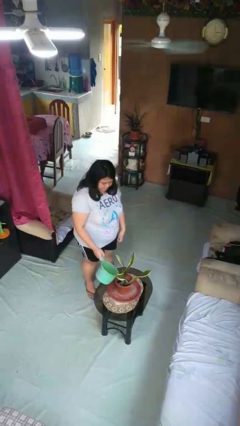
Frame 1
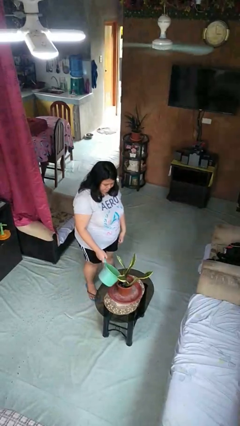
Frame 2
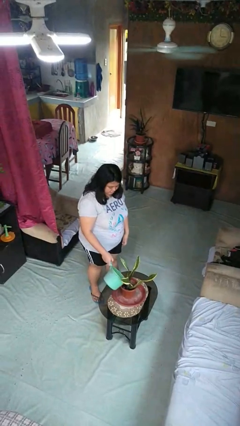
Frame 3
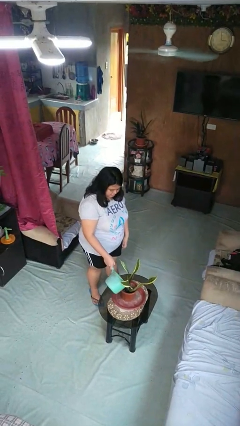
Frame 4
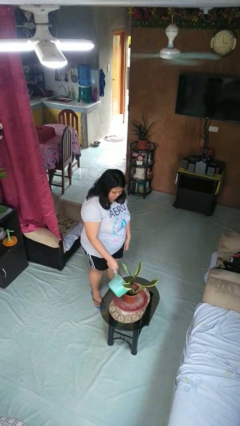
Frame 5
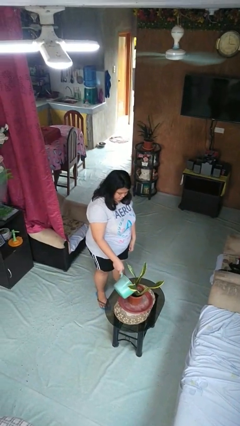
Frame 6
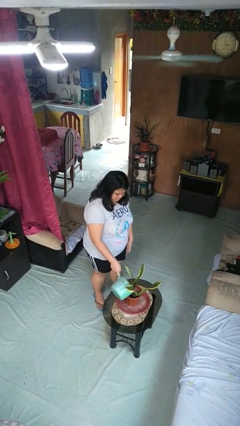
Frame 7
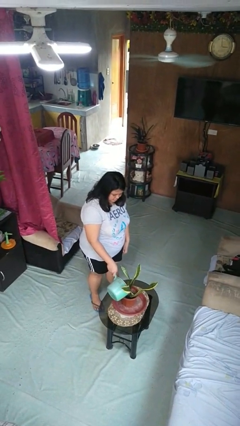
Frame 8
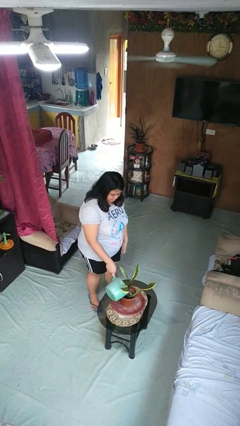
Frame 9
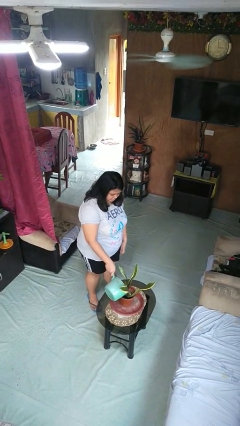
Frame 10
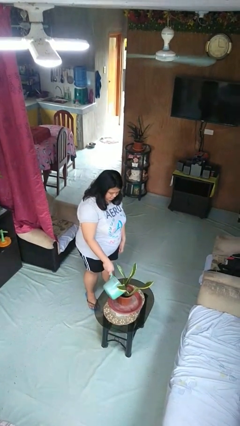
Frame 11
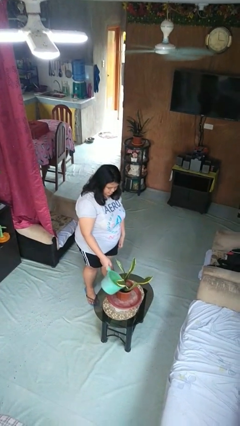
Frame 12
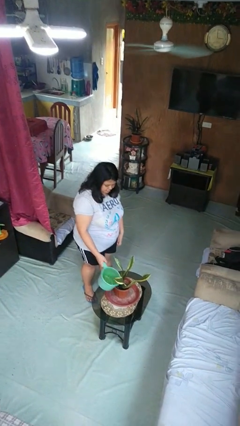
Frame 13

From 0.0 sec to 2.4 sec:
person waters houseplant

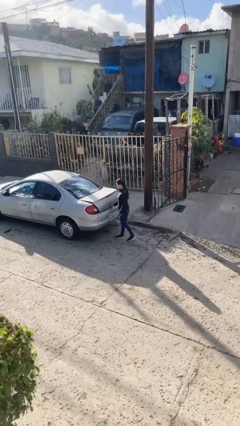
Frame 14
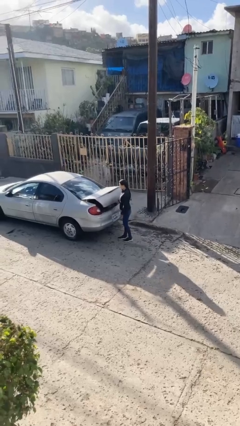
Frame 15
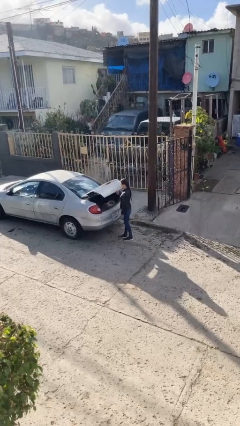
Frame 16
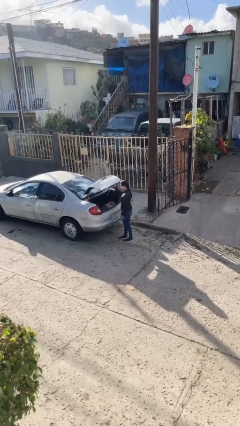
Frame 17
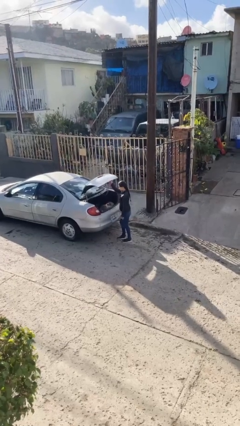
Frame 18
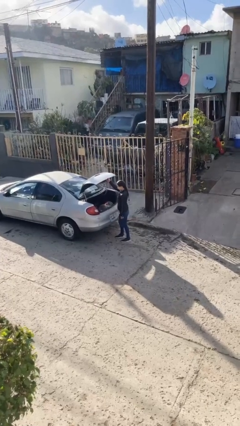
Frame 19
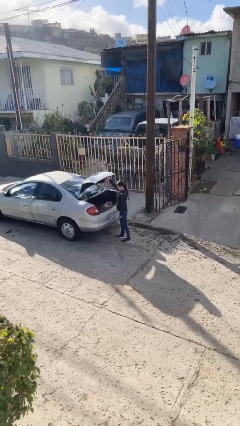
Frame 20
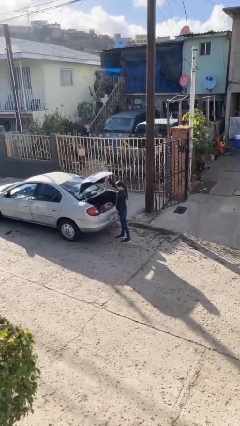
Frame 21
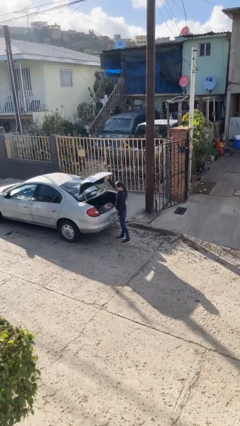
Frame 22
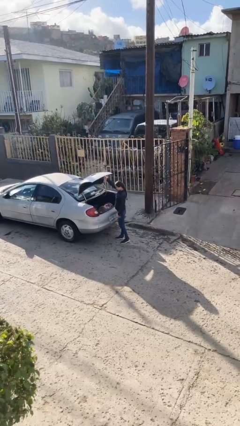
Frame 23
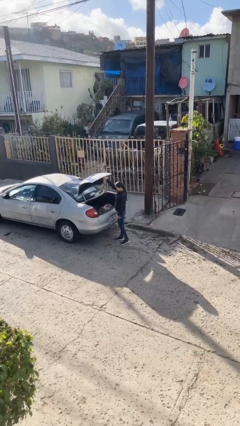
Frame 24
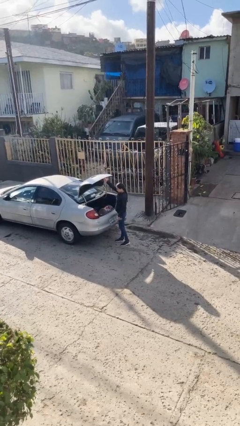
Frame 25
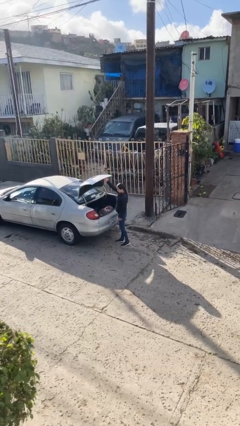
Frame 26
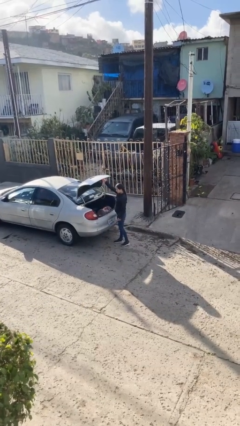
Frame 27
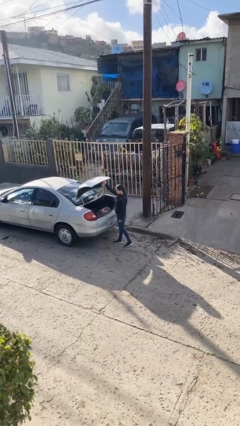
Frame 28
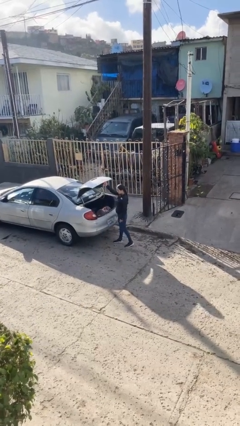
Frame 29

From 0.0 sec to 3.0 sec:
person opens car trunk

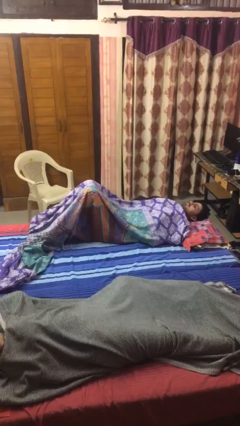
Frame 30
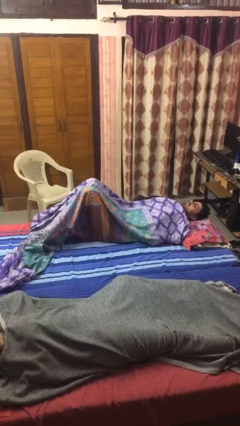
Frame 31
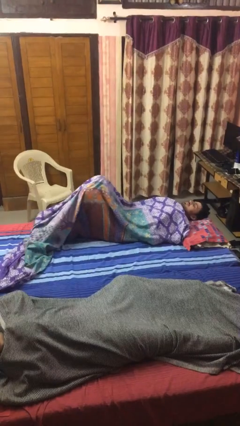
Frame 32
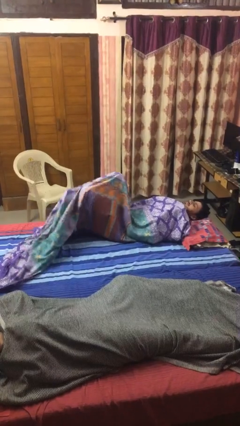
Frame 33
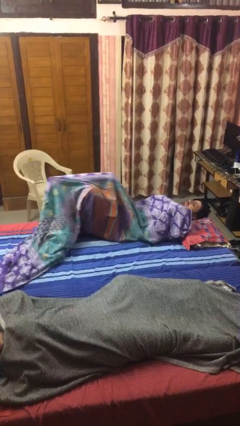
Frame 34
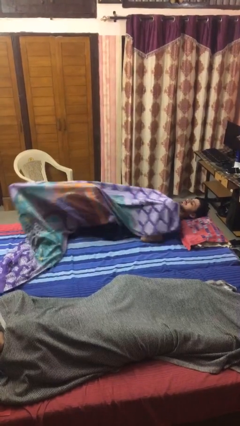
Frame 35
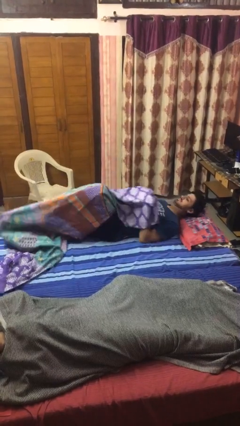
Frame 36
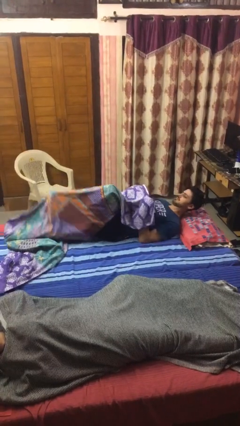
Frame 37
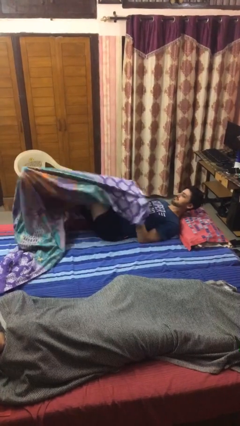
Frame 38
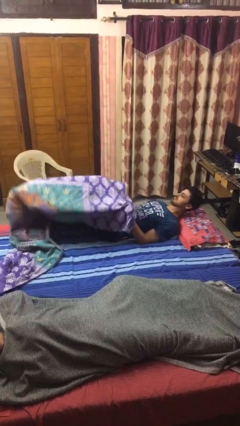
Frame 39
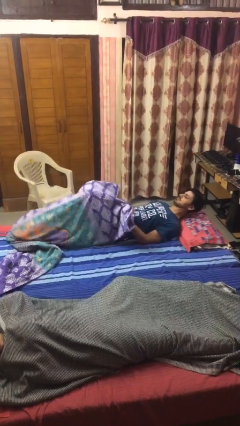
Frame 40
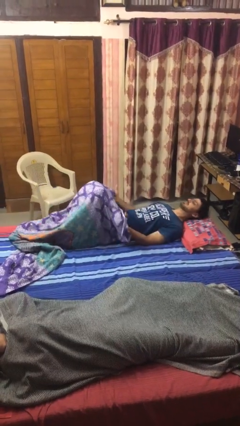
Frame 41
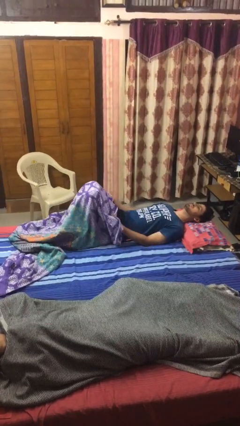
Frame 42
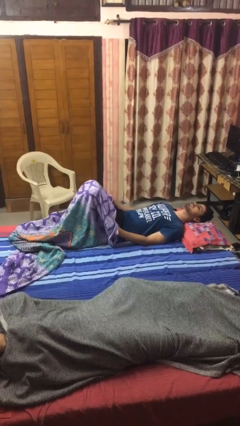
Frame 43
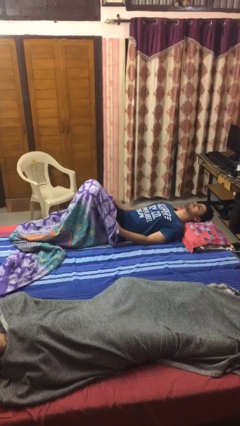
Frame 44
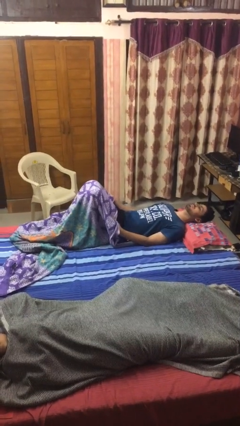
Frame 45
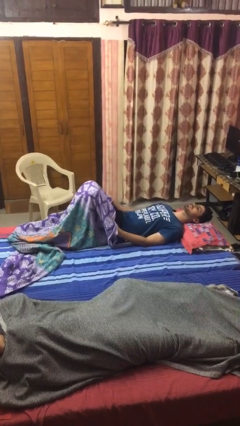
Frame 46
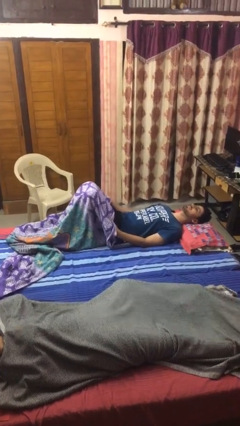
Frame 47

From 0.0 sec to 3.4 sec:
person uncovers with bedsheets

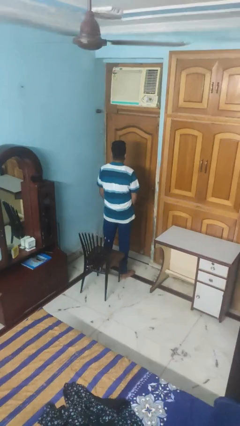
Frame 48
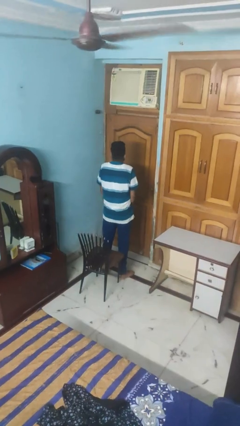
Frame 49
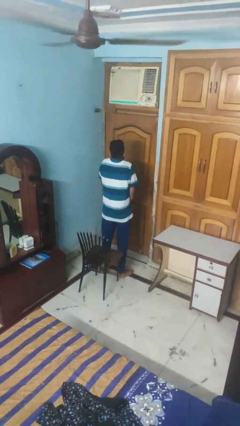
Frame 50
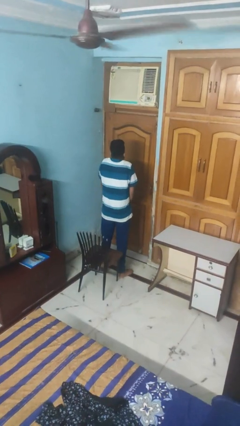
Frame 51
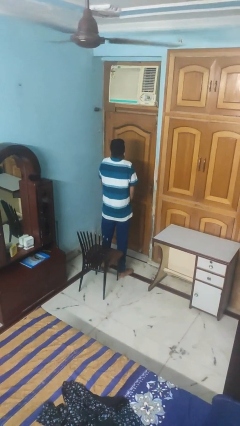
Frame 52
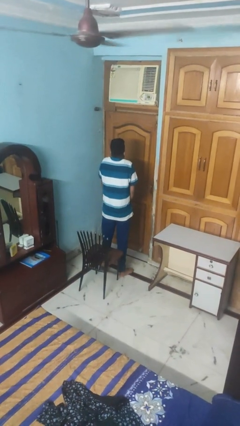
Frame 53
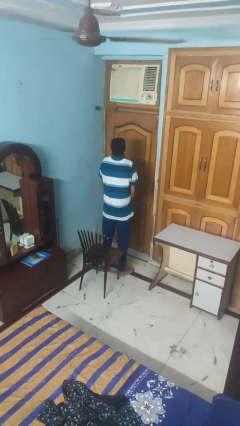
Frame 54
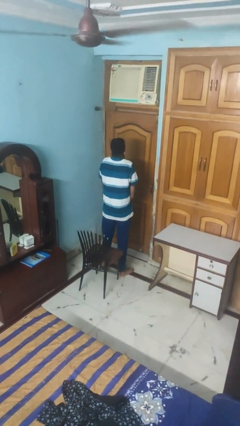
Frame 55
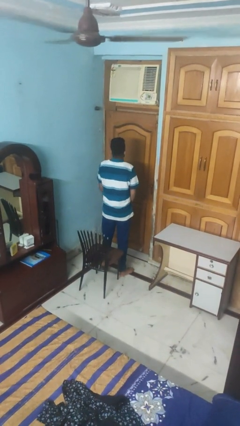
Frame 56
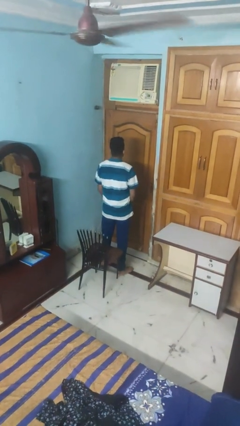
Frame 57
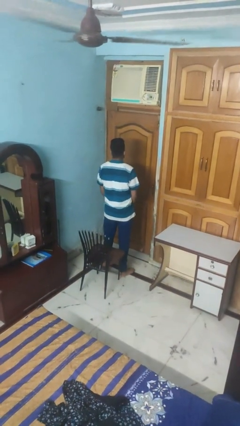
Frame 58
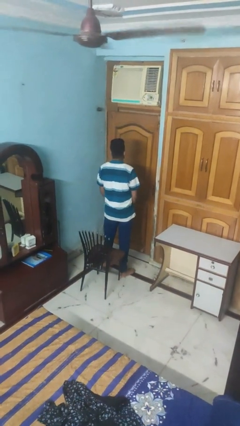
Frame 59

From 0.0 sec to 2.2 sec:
person shrugs

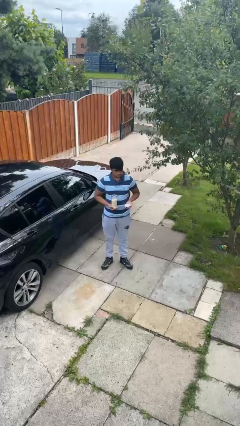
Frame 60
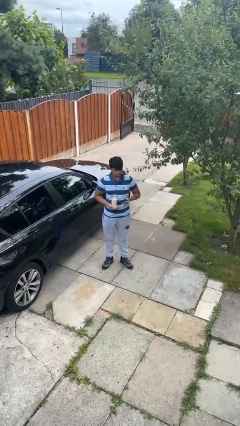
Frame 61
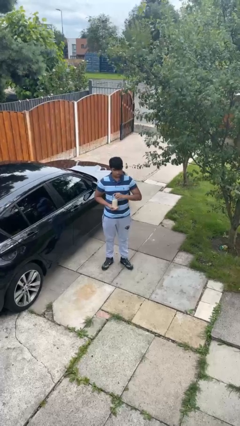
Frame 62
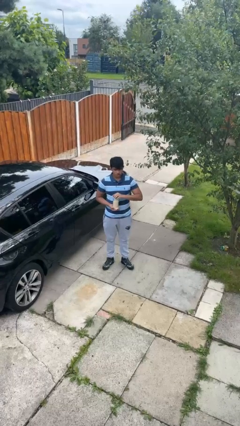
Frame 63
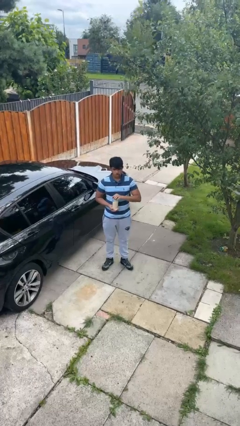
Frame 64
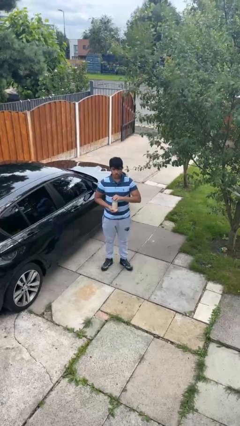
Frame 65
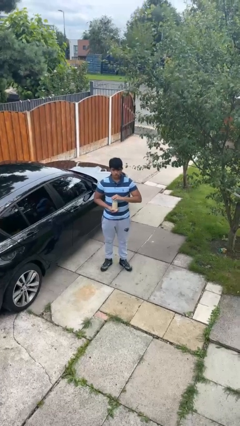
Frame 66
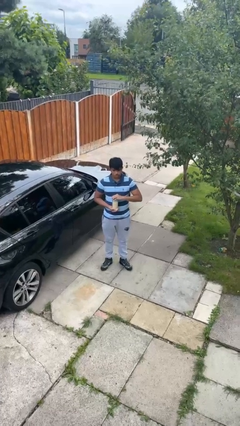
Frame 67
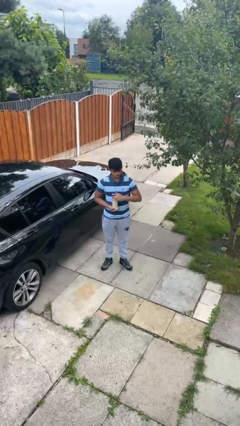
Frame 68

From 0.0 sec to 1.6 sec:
person closes jar

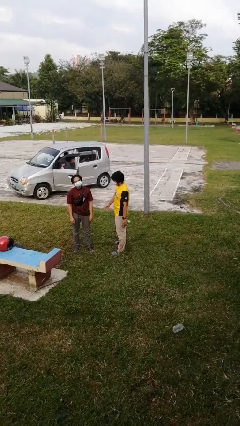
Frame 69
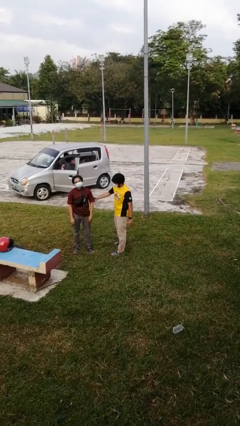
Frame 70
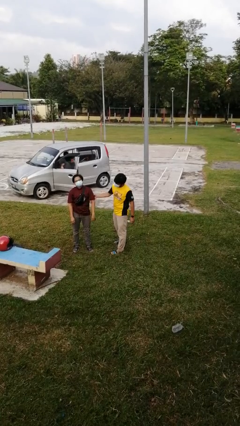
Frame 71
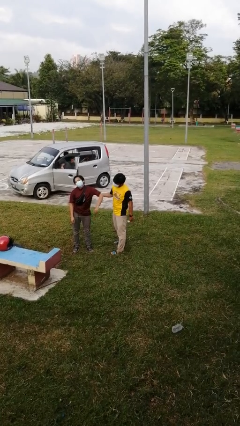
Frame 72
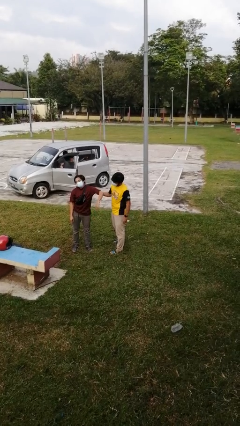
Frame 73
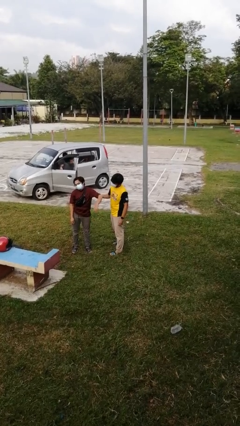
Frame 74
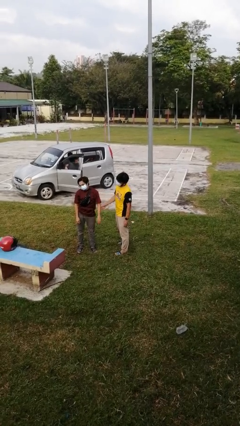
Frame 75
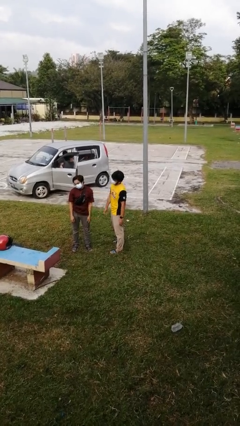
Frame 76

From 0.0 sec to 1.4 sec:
person grabs person by bicep

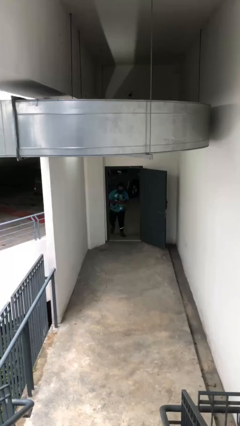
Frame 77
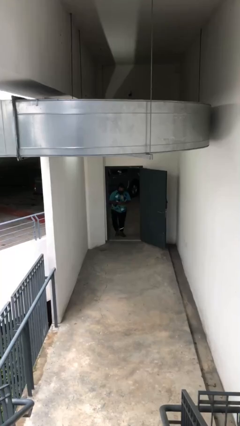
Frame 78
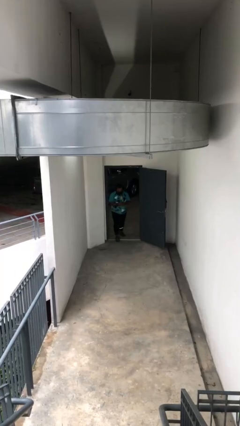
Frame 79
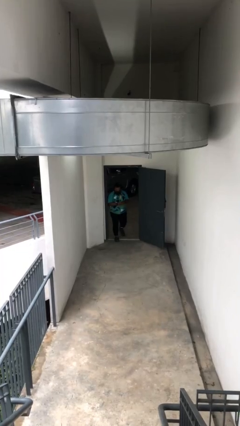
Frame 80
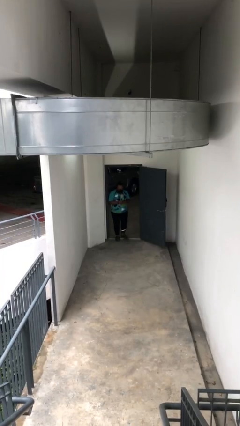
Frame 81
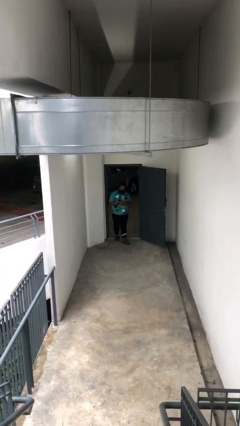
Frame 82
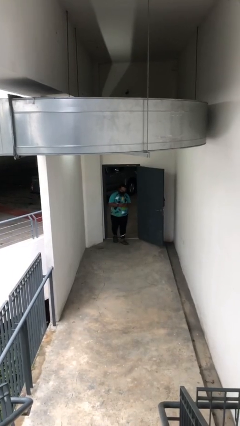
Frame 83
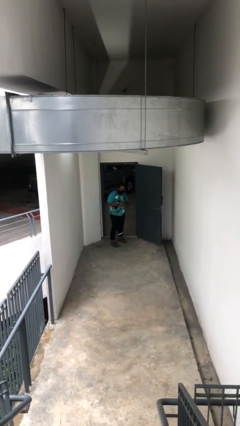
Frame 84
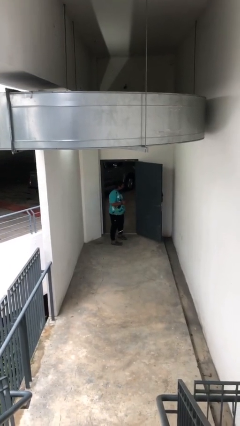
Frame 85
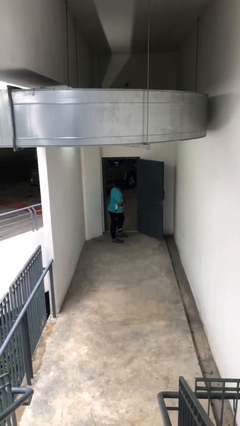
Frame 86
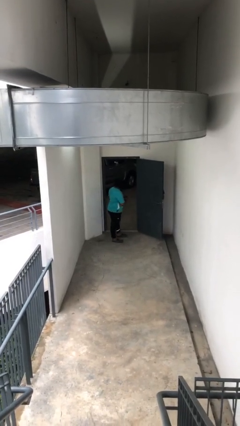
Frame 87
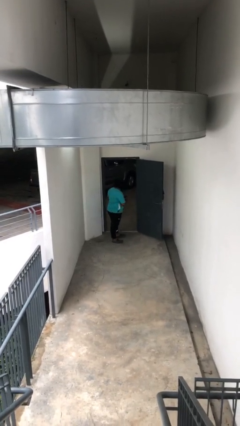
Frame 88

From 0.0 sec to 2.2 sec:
person enters scene through structure

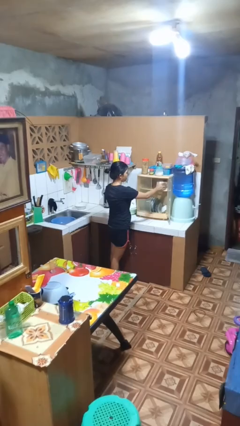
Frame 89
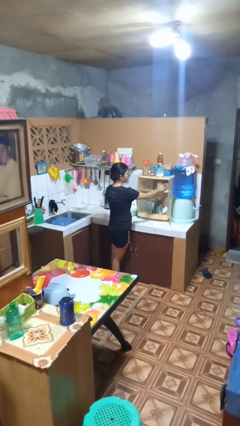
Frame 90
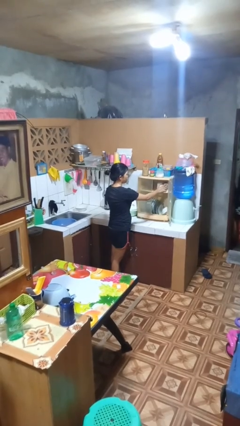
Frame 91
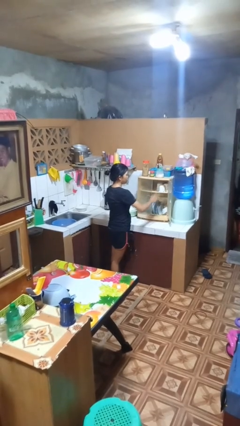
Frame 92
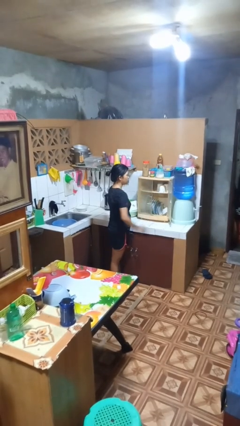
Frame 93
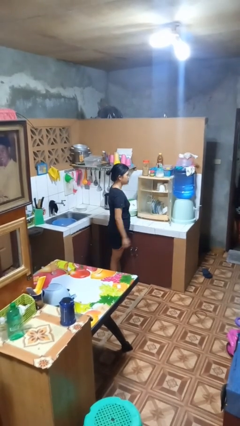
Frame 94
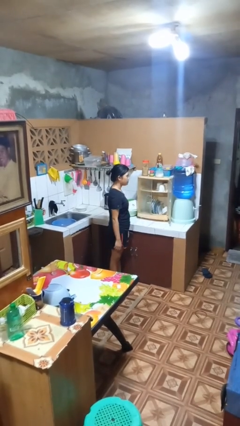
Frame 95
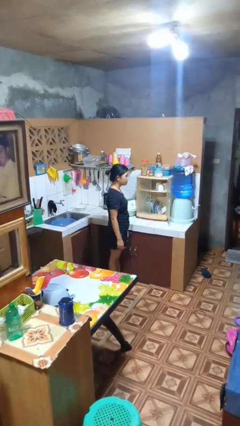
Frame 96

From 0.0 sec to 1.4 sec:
person puts object into kitchen drawer
